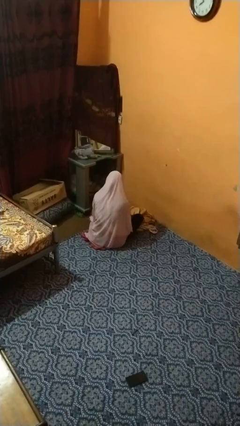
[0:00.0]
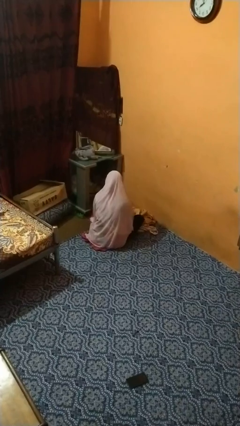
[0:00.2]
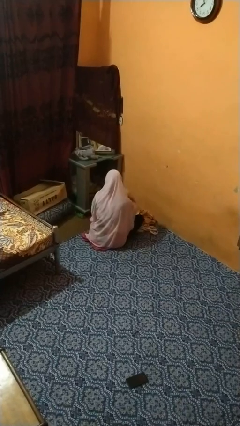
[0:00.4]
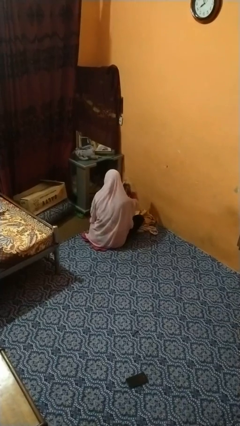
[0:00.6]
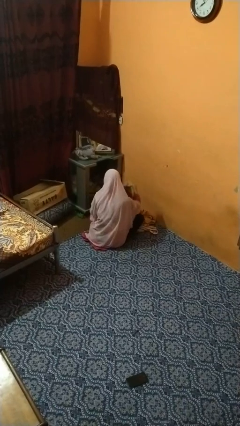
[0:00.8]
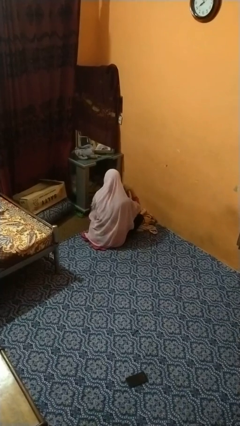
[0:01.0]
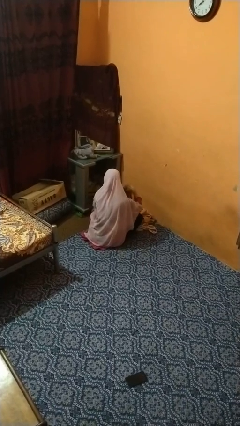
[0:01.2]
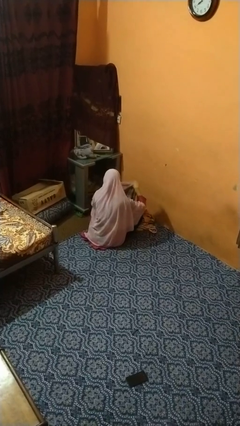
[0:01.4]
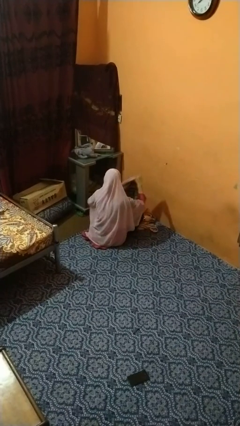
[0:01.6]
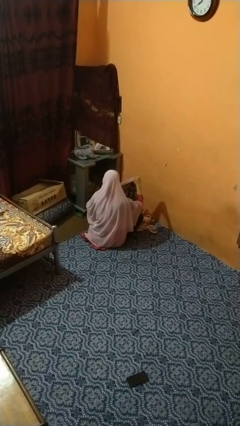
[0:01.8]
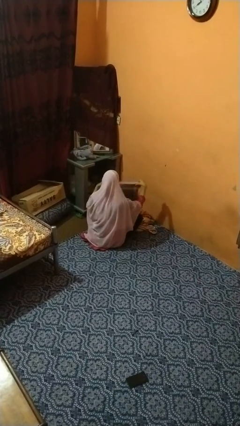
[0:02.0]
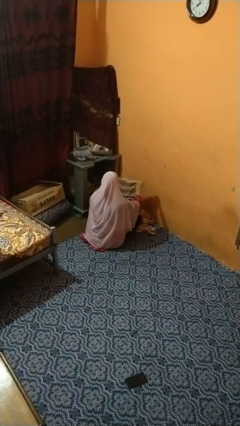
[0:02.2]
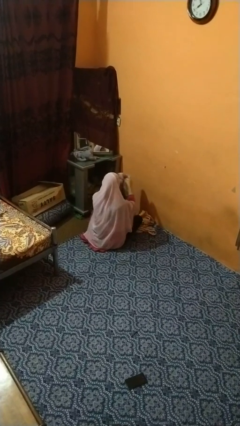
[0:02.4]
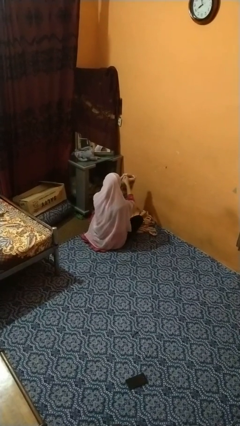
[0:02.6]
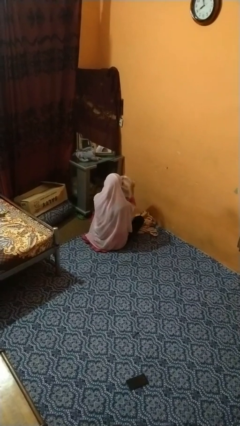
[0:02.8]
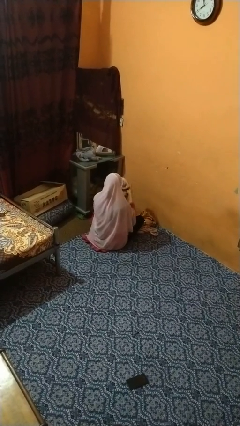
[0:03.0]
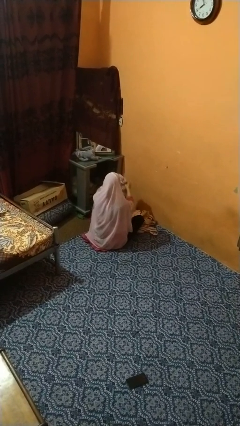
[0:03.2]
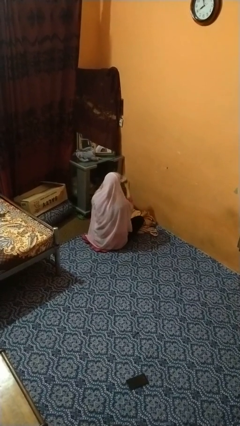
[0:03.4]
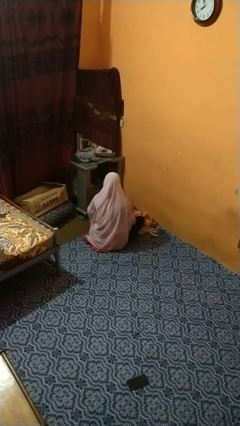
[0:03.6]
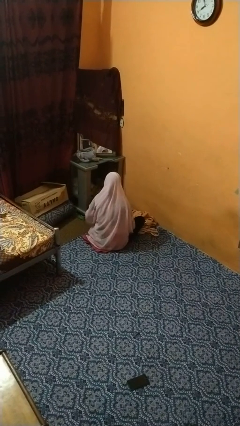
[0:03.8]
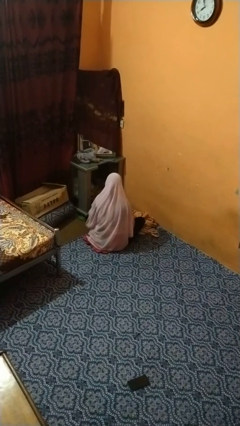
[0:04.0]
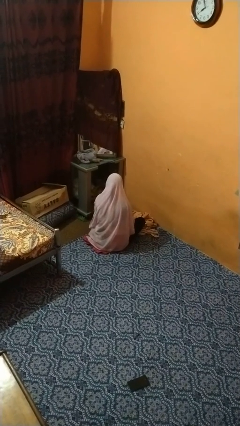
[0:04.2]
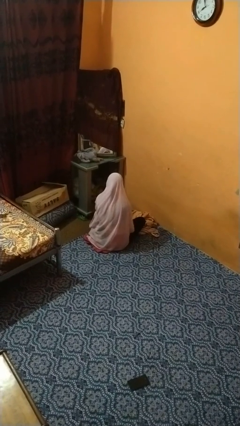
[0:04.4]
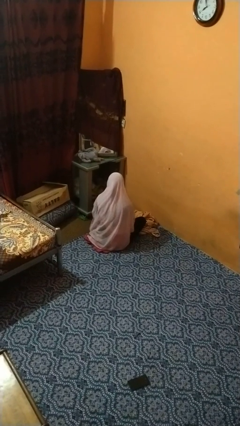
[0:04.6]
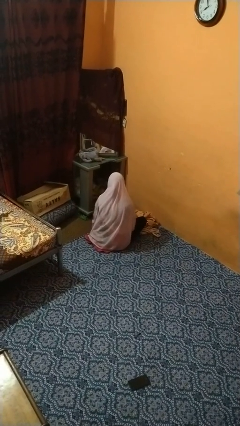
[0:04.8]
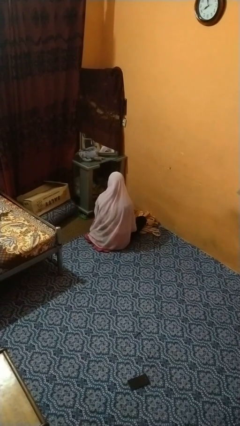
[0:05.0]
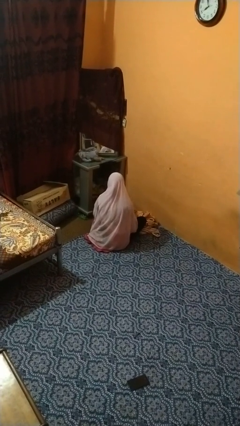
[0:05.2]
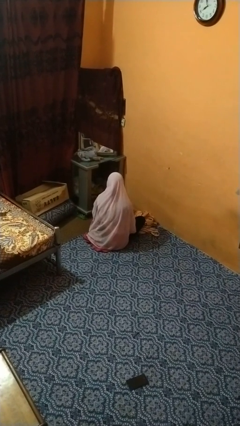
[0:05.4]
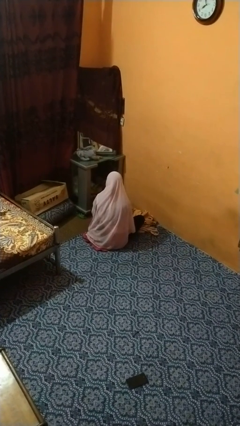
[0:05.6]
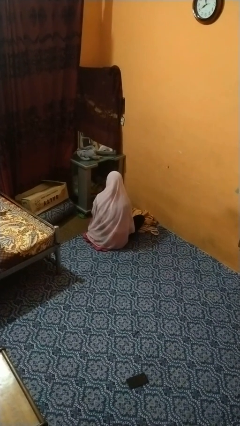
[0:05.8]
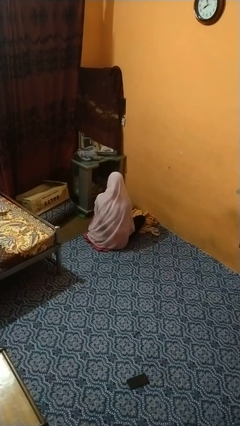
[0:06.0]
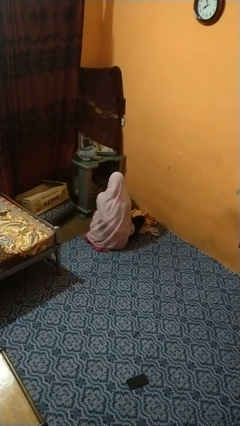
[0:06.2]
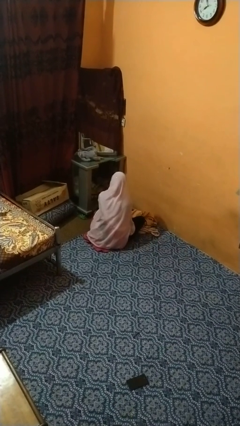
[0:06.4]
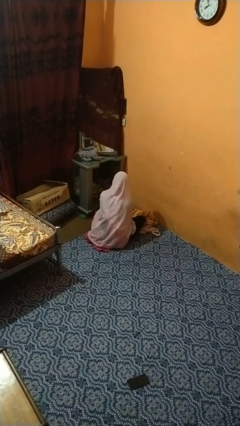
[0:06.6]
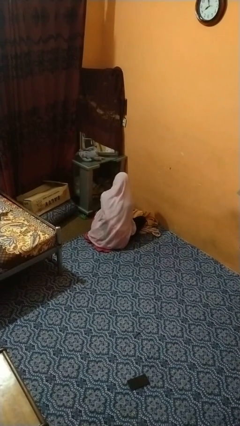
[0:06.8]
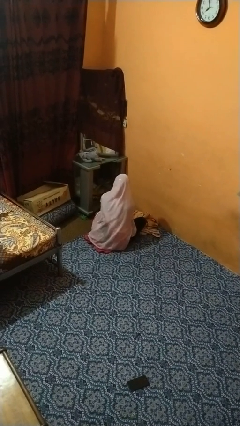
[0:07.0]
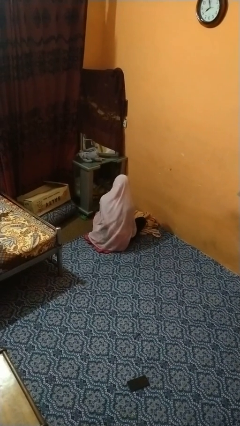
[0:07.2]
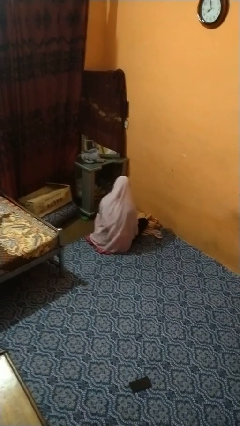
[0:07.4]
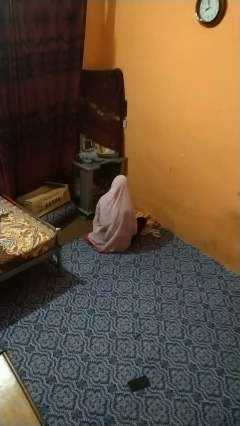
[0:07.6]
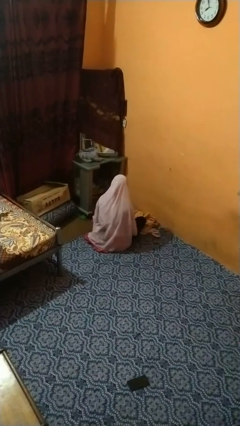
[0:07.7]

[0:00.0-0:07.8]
person folds towel

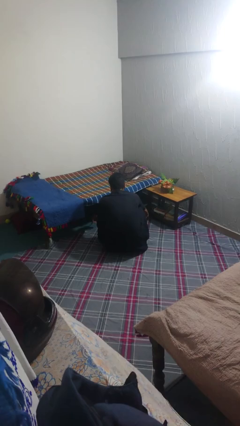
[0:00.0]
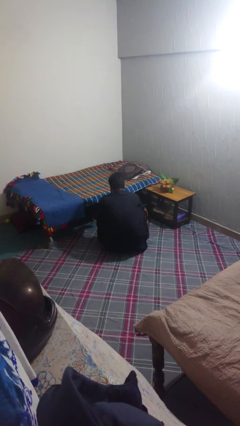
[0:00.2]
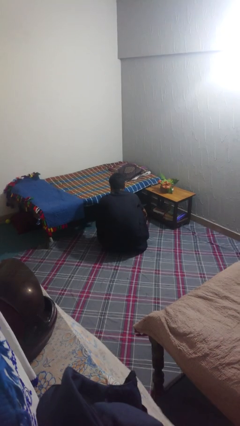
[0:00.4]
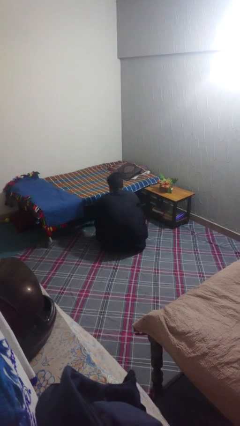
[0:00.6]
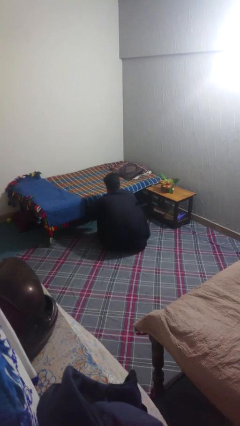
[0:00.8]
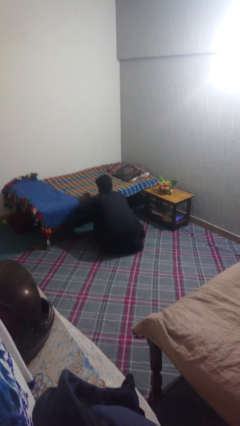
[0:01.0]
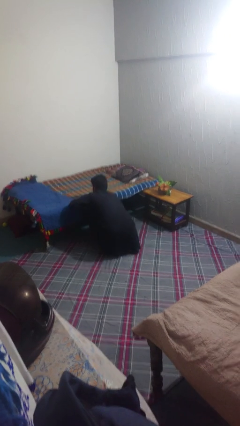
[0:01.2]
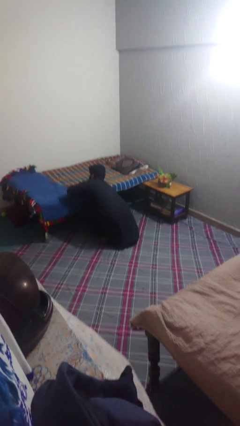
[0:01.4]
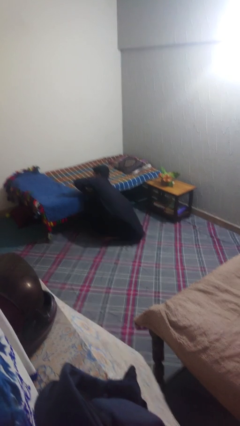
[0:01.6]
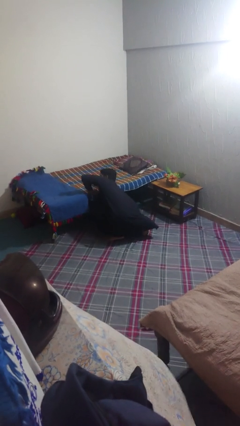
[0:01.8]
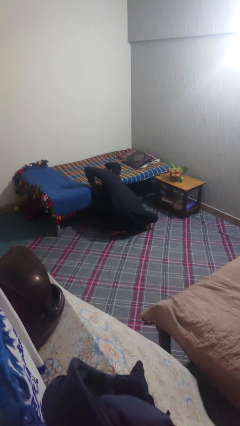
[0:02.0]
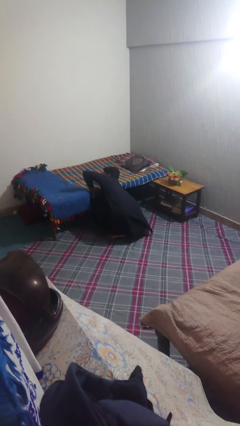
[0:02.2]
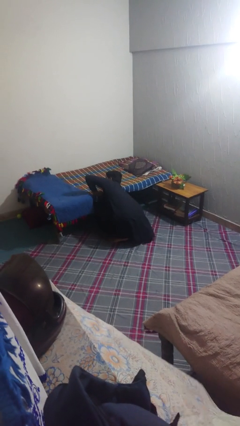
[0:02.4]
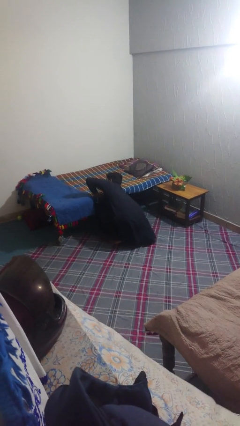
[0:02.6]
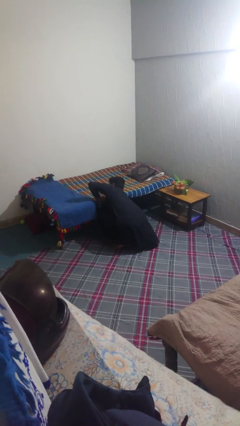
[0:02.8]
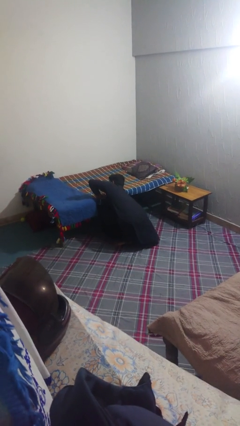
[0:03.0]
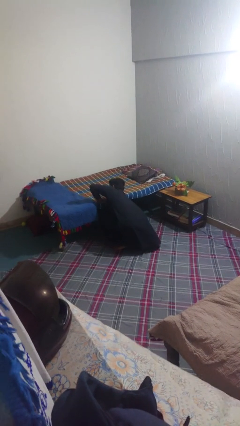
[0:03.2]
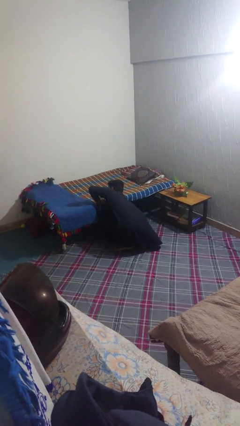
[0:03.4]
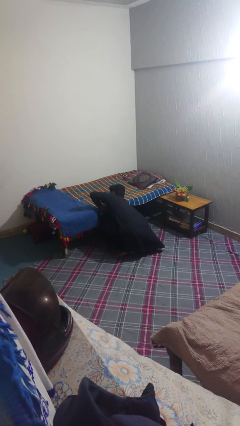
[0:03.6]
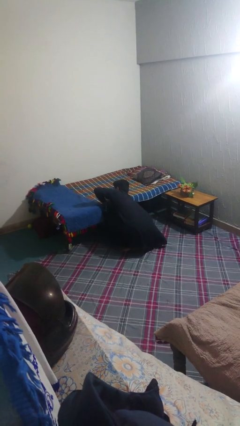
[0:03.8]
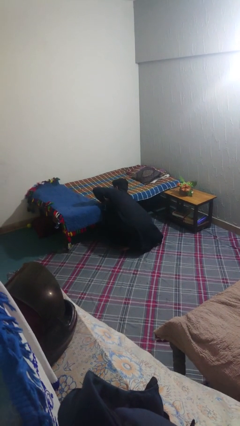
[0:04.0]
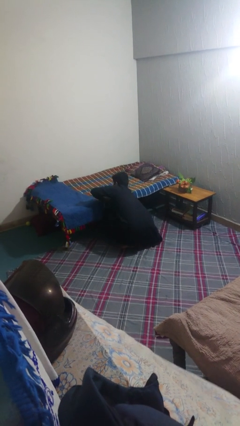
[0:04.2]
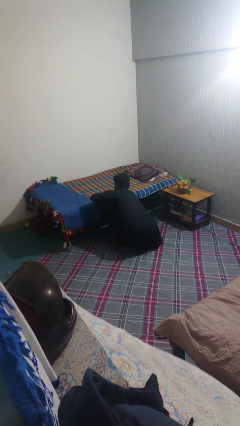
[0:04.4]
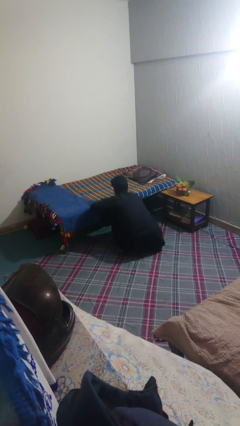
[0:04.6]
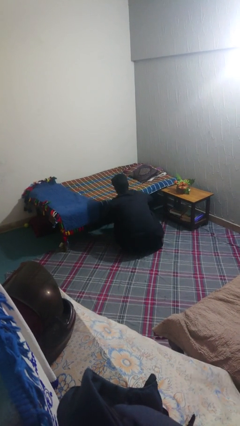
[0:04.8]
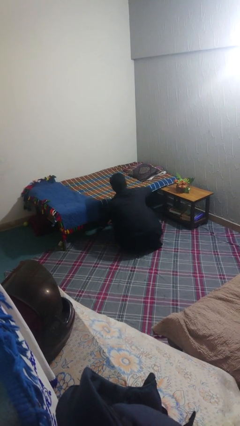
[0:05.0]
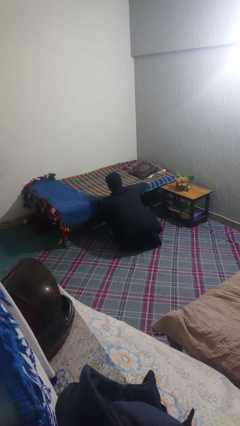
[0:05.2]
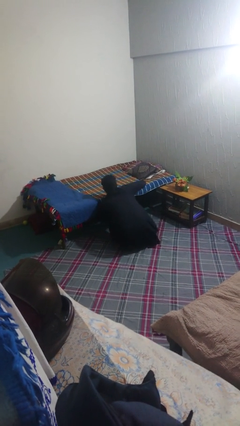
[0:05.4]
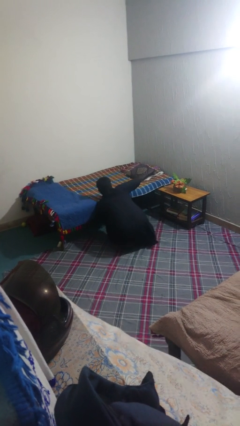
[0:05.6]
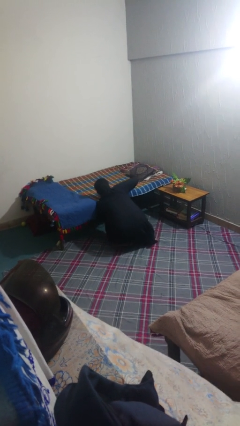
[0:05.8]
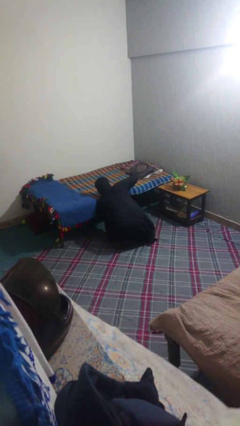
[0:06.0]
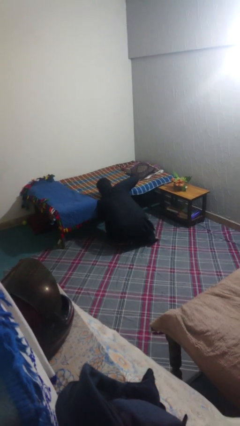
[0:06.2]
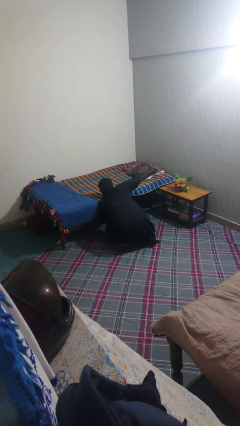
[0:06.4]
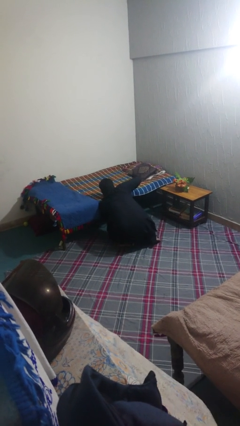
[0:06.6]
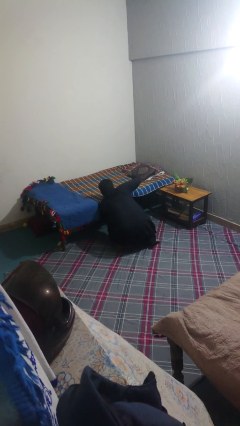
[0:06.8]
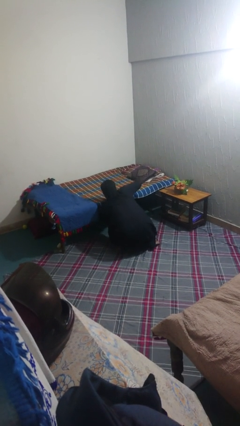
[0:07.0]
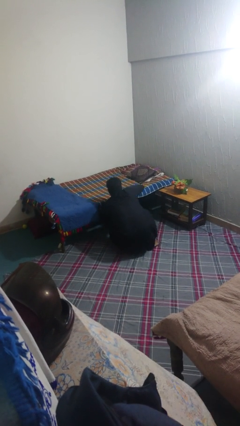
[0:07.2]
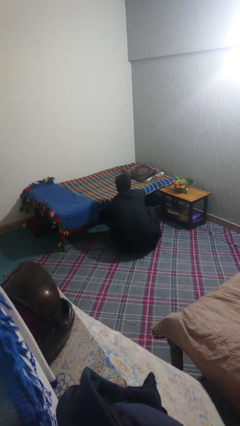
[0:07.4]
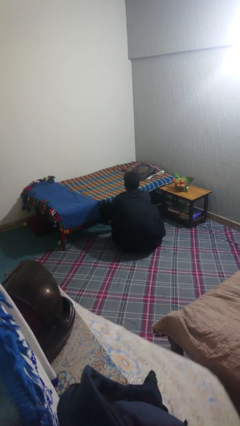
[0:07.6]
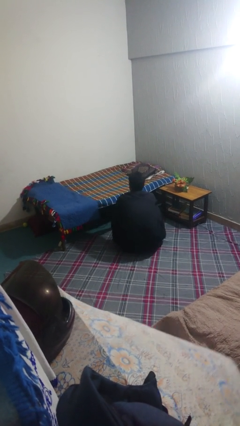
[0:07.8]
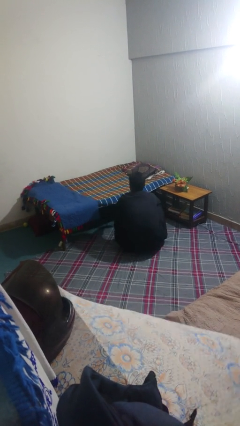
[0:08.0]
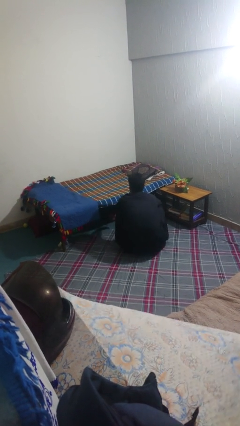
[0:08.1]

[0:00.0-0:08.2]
person searches under bed

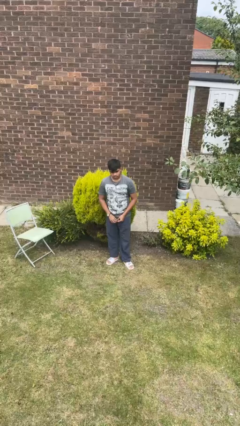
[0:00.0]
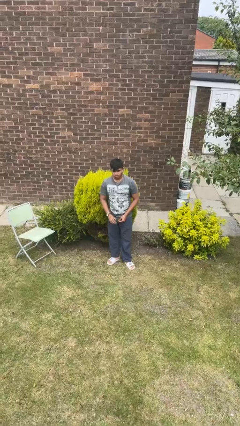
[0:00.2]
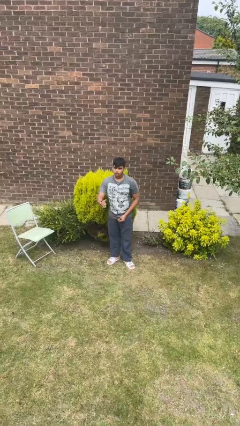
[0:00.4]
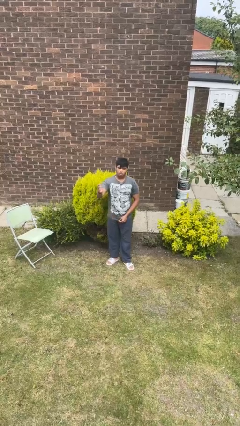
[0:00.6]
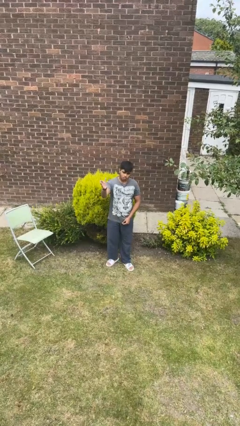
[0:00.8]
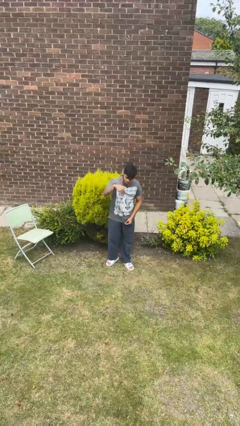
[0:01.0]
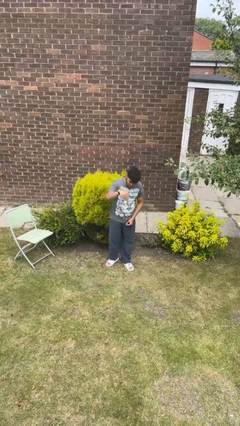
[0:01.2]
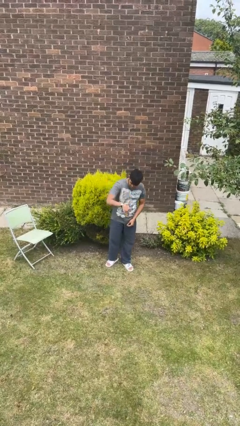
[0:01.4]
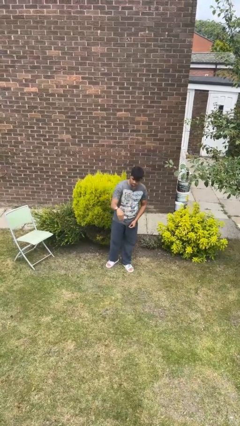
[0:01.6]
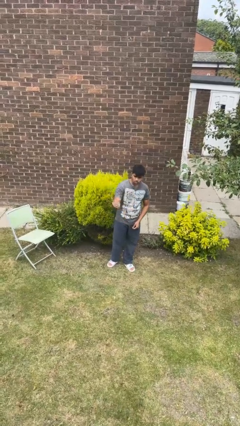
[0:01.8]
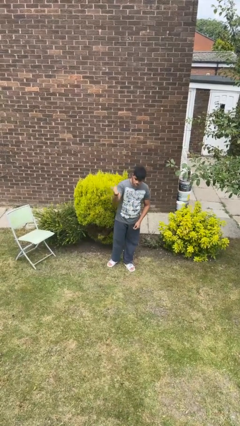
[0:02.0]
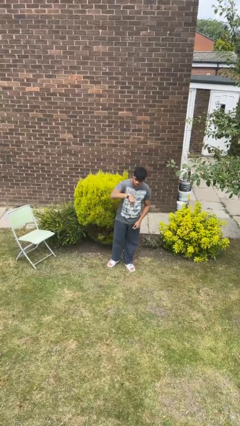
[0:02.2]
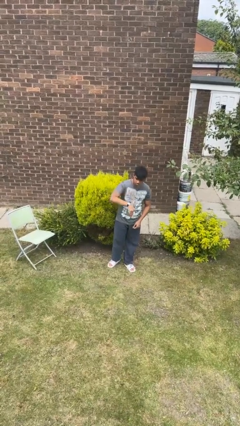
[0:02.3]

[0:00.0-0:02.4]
person gestures come here
